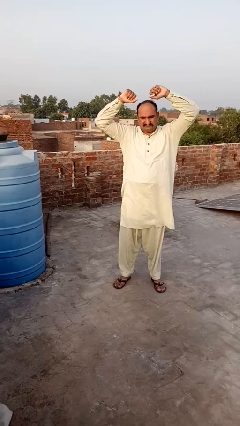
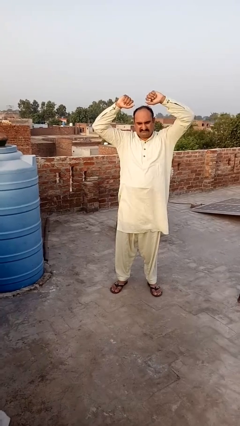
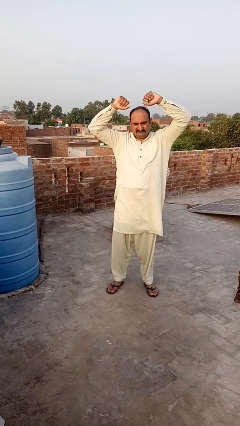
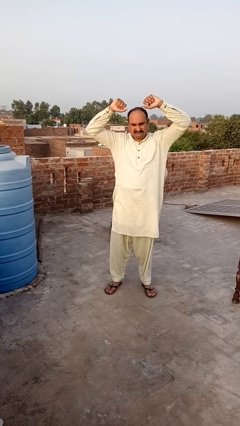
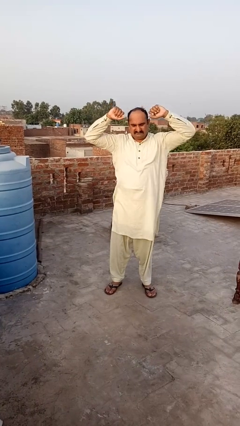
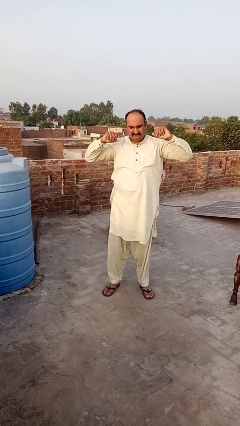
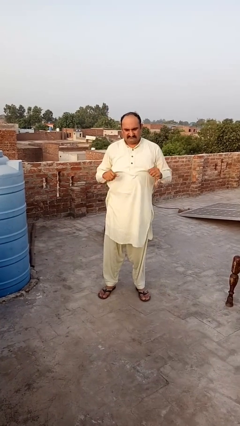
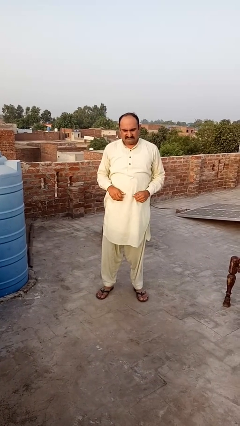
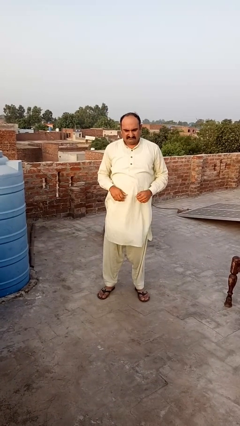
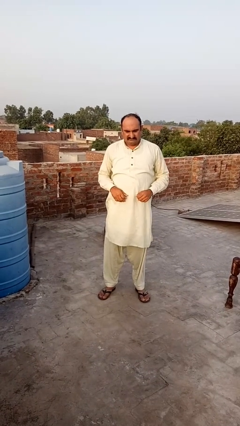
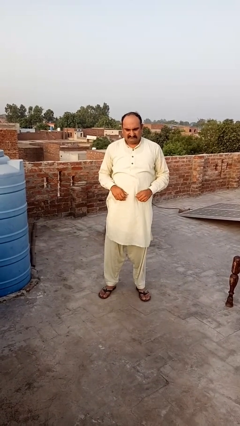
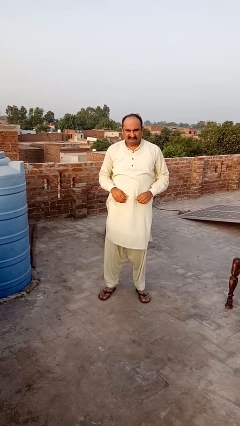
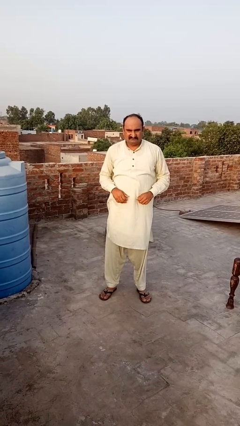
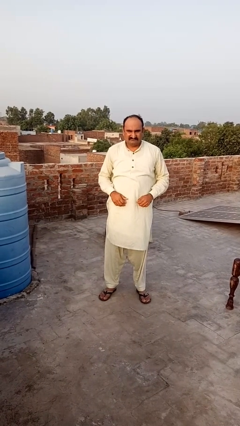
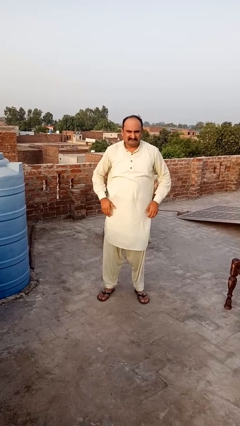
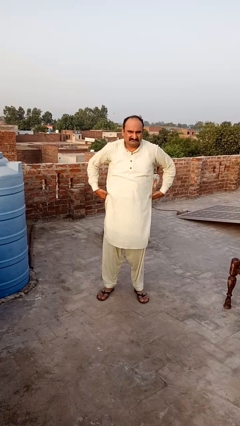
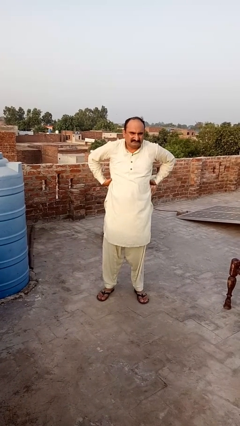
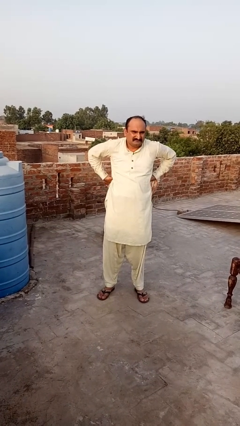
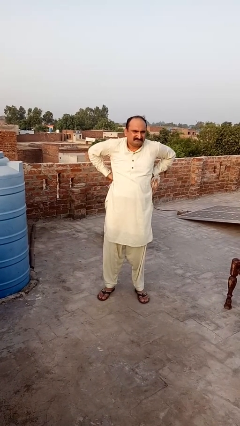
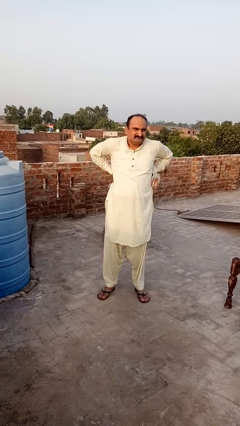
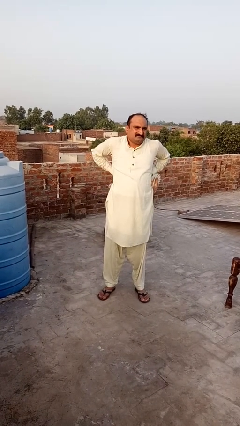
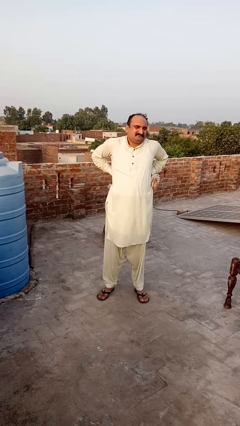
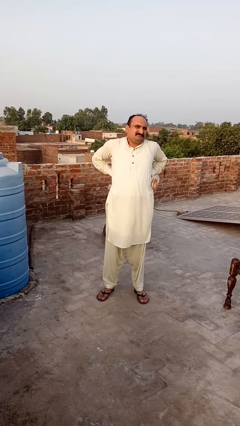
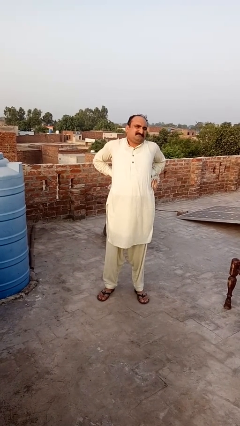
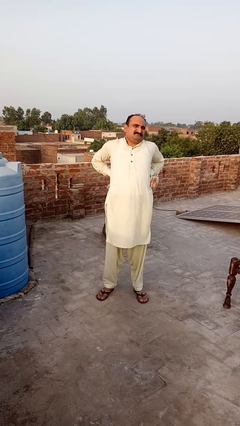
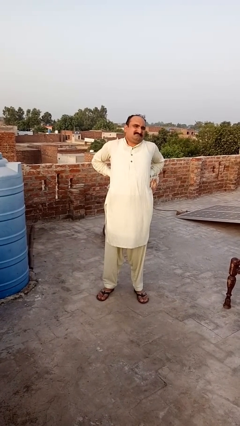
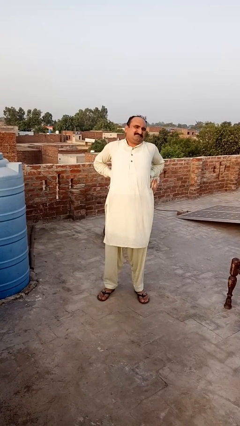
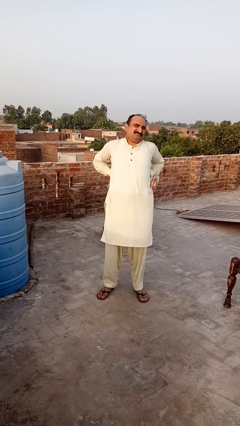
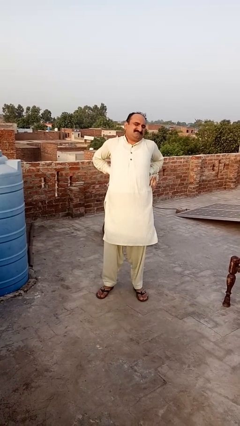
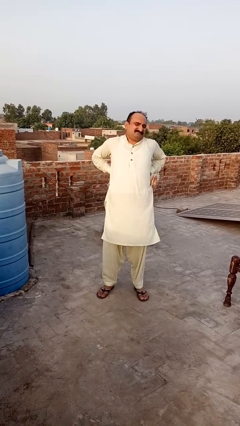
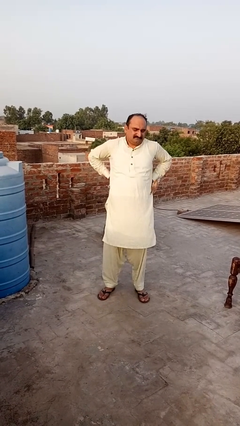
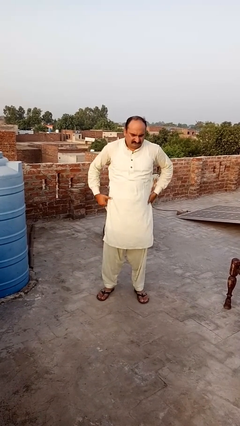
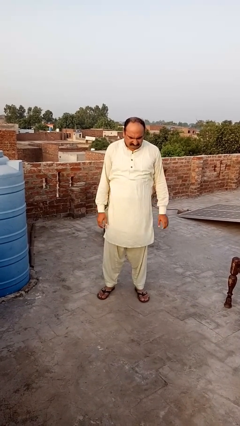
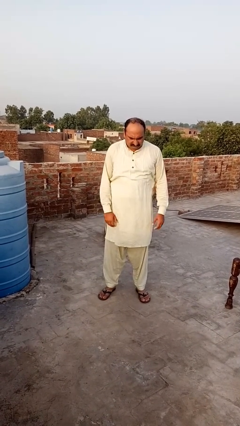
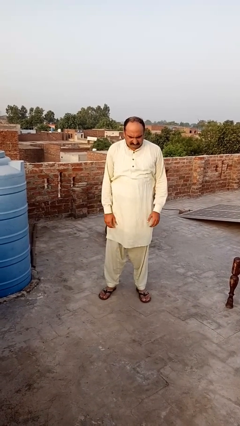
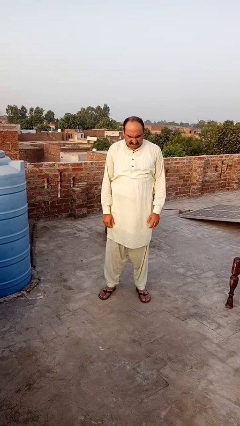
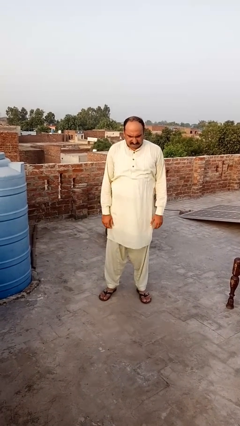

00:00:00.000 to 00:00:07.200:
person stretches back

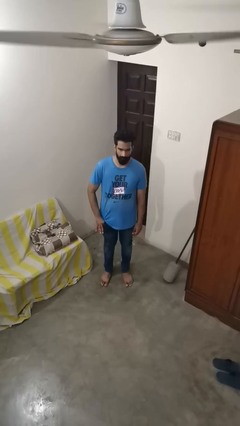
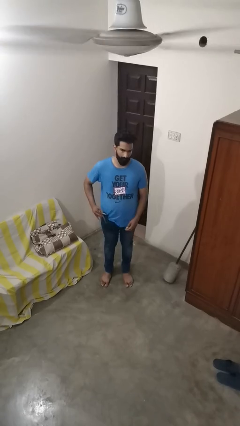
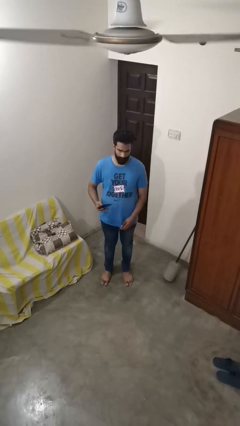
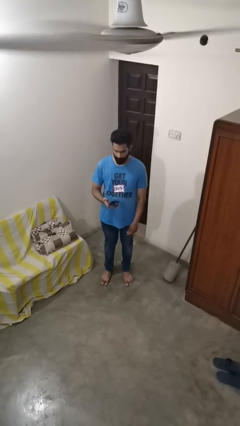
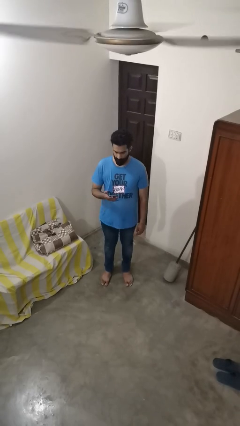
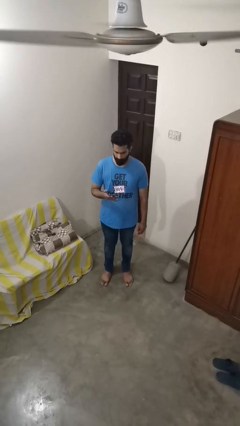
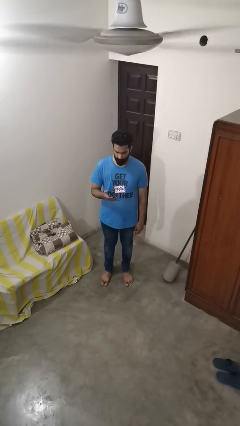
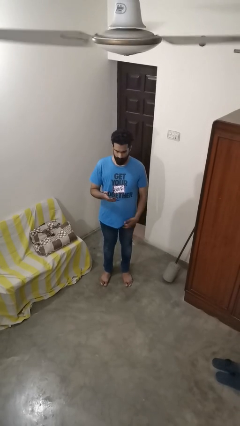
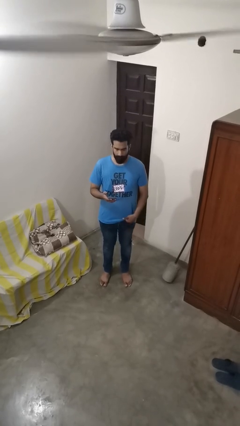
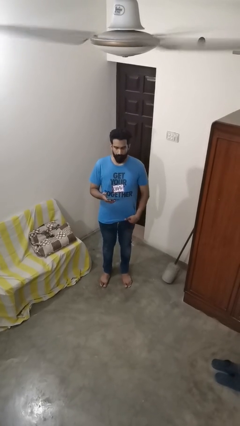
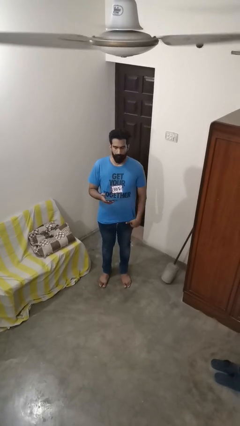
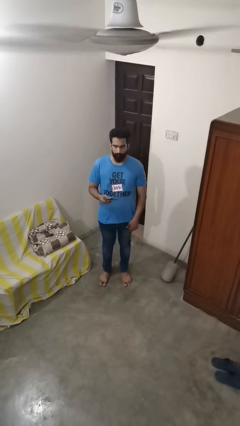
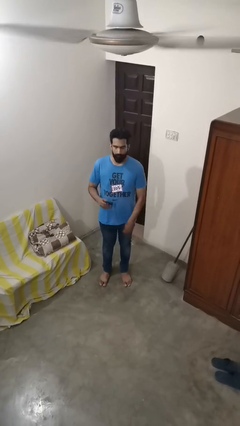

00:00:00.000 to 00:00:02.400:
person takes phone from pocket

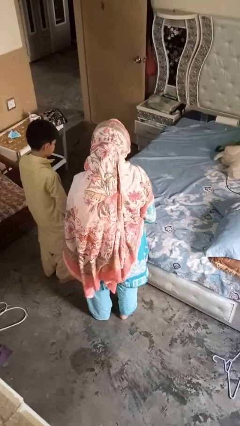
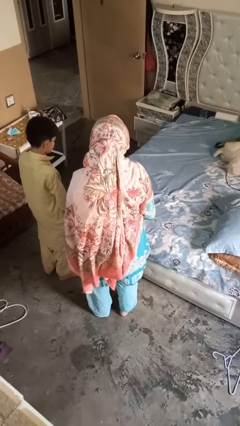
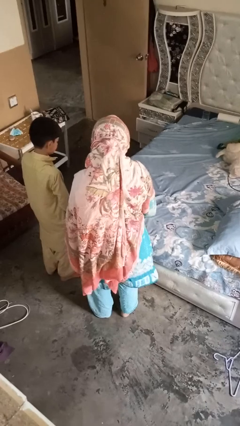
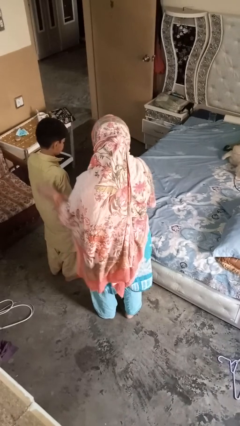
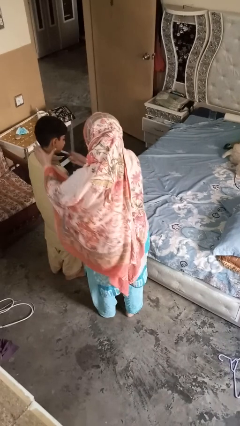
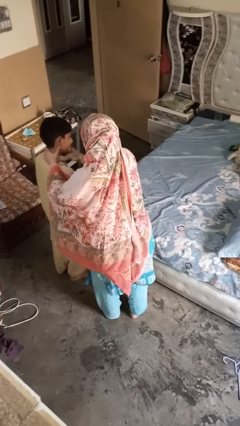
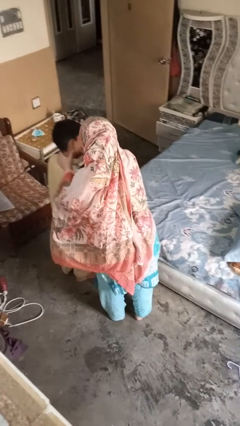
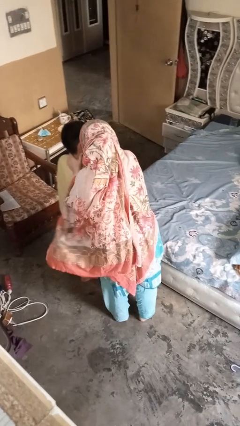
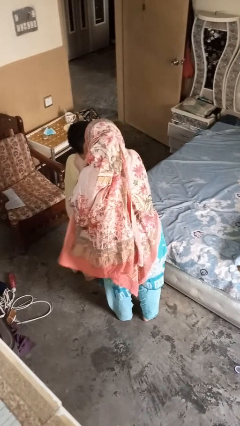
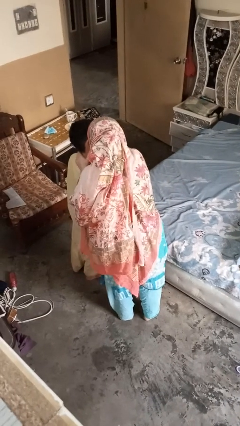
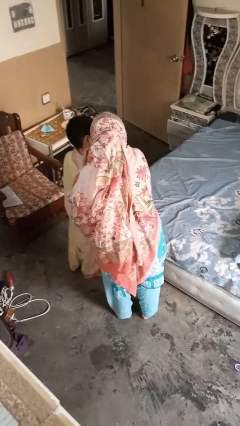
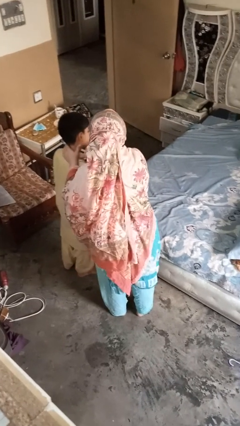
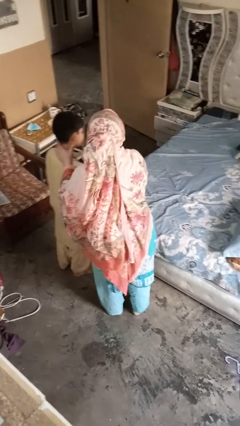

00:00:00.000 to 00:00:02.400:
person gestures blow kiss

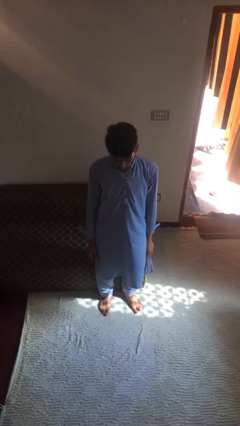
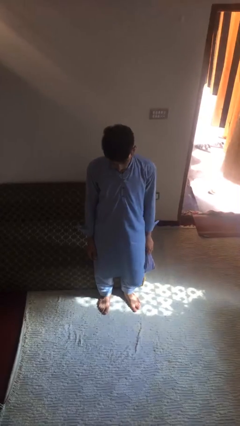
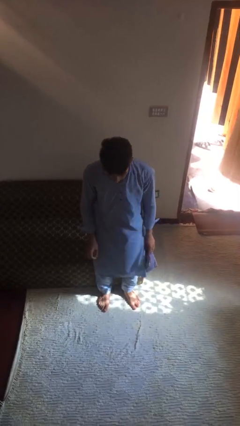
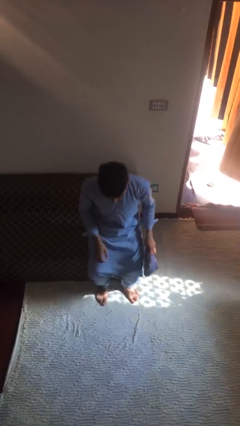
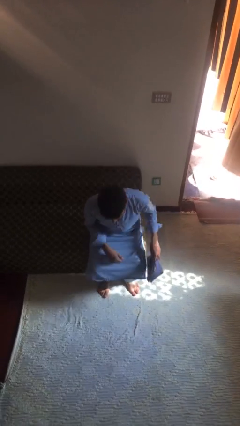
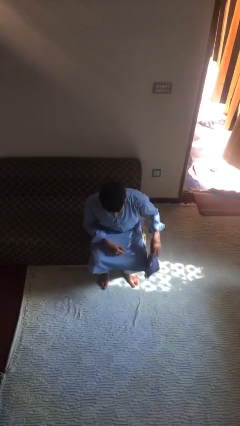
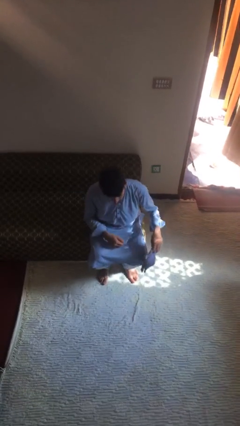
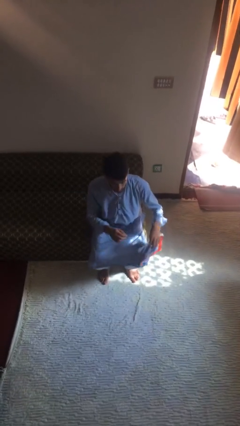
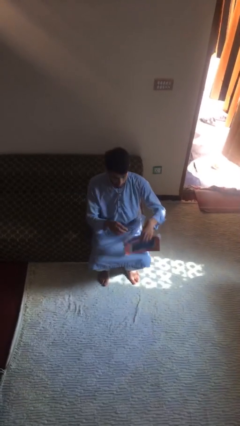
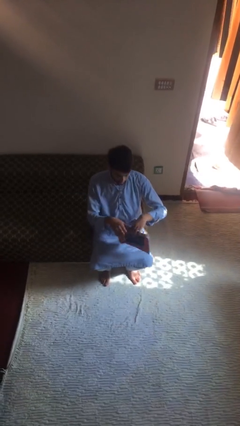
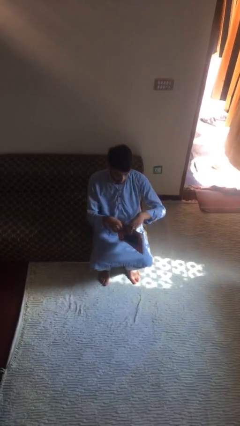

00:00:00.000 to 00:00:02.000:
person sits down

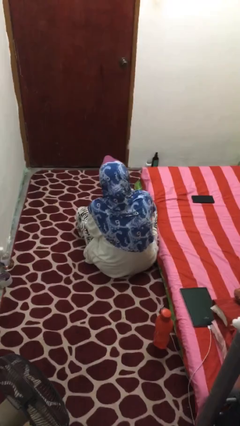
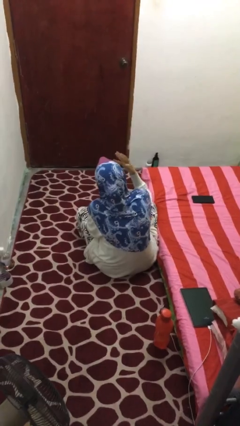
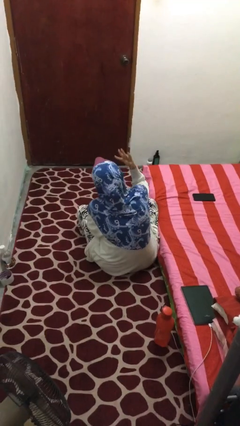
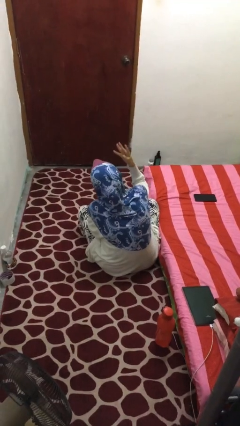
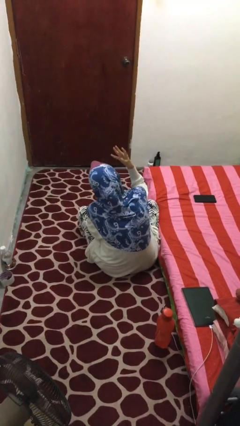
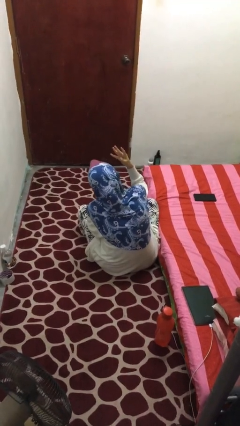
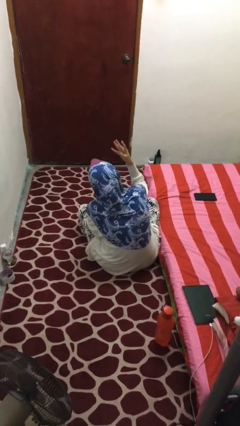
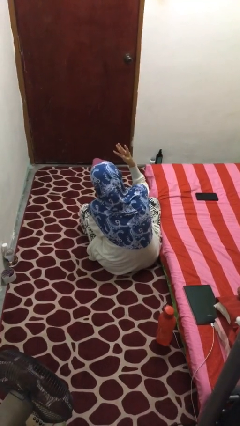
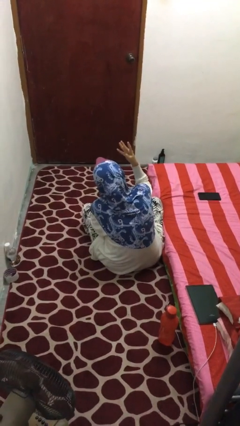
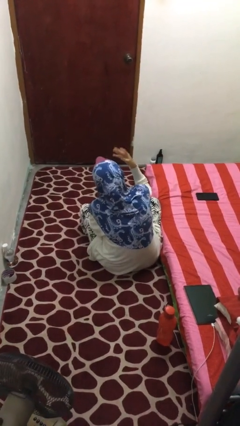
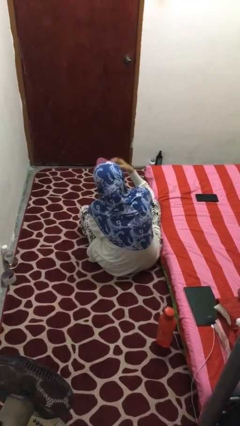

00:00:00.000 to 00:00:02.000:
person gestures number four

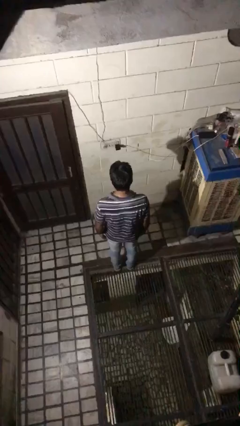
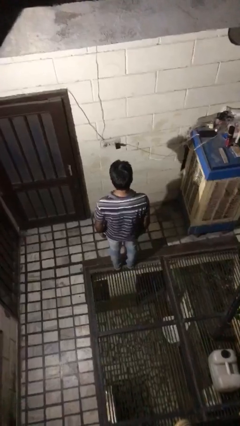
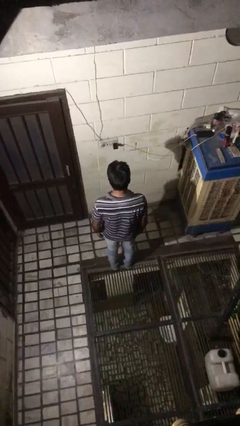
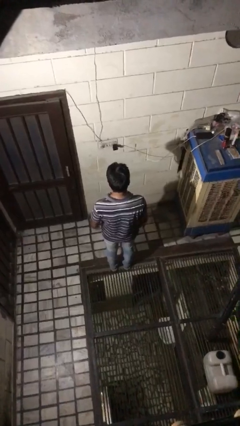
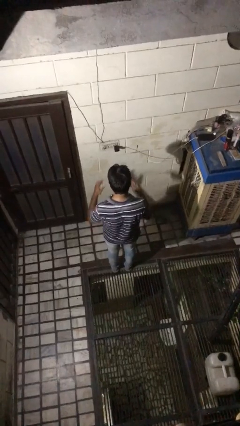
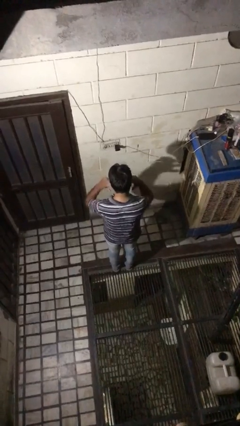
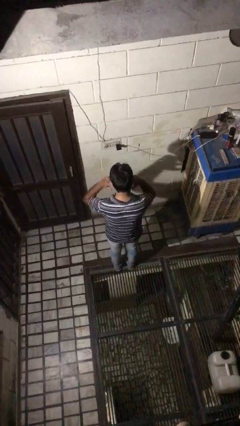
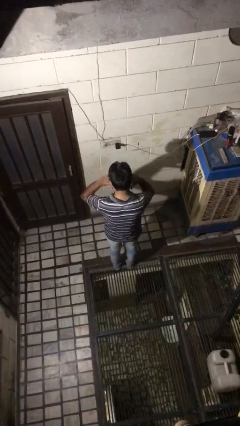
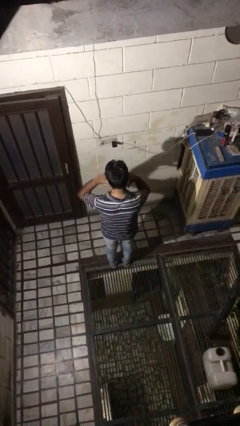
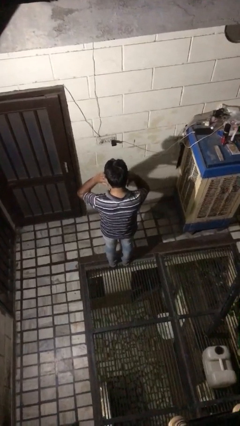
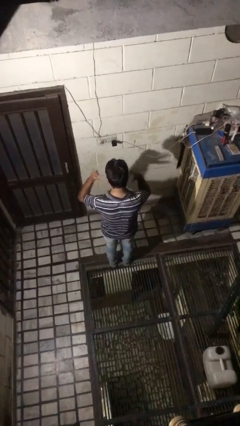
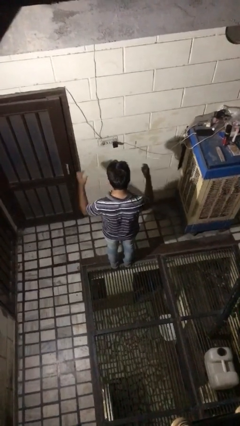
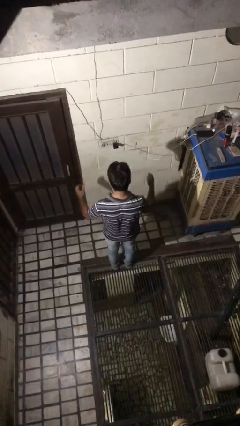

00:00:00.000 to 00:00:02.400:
person puts fingers in ear
